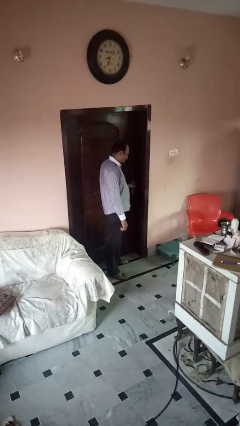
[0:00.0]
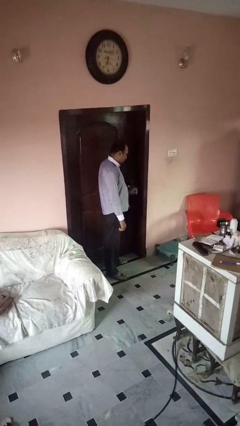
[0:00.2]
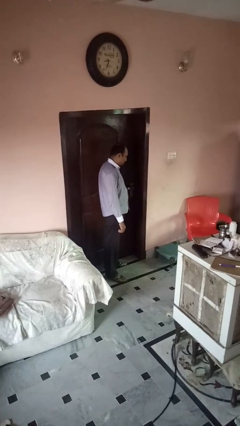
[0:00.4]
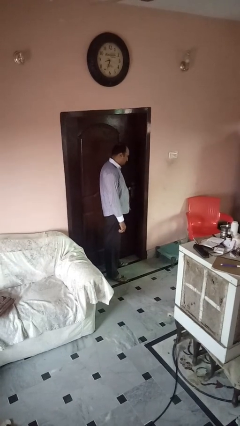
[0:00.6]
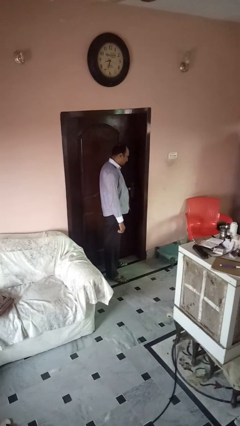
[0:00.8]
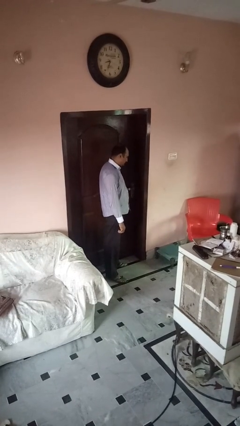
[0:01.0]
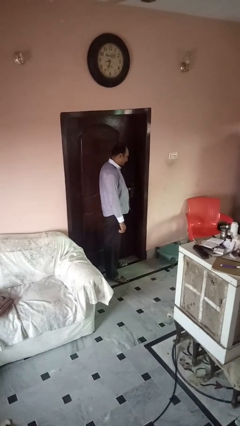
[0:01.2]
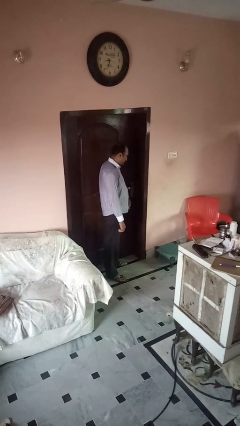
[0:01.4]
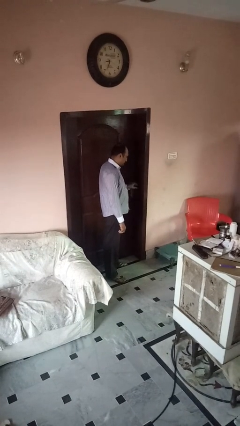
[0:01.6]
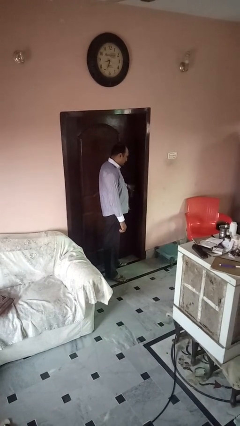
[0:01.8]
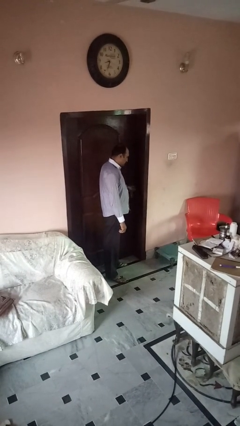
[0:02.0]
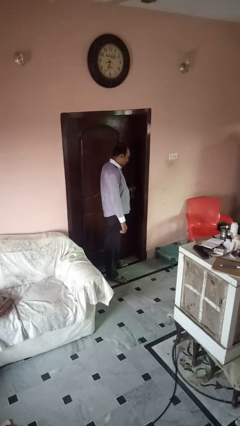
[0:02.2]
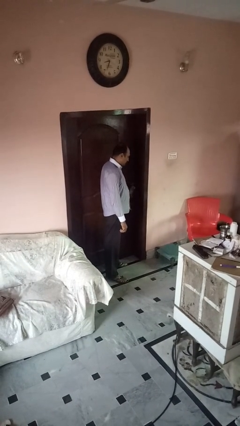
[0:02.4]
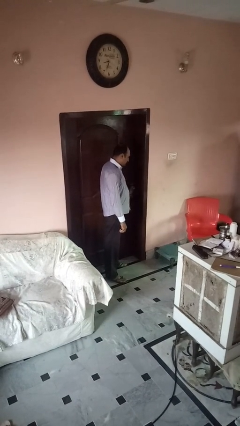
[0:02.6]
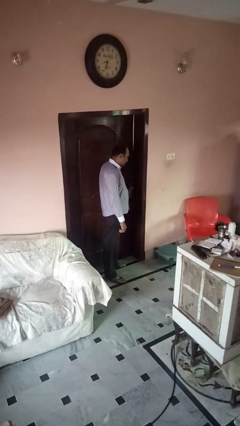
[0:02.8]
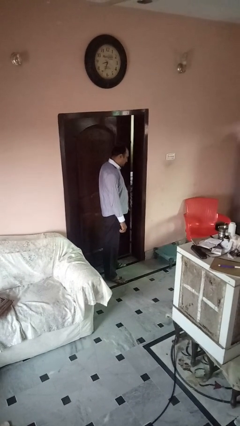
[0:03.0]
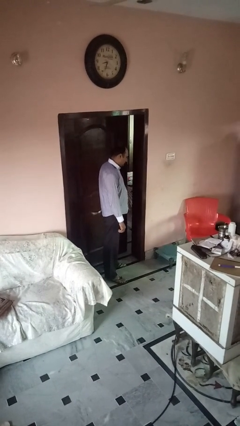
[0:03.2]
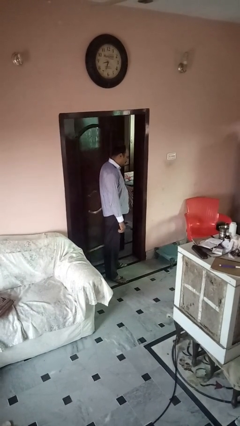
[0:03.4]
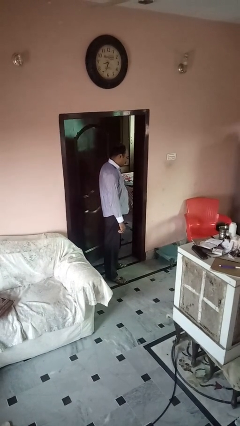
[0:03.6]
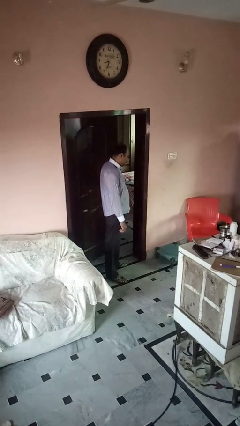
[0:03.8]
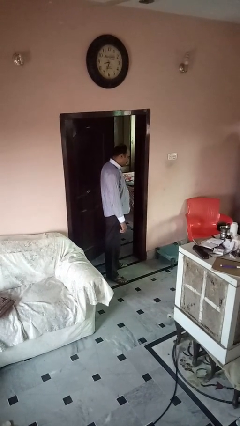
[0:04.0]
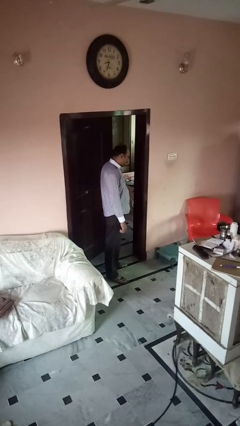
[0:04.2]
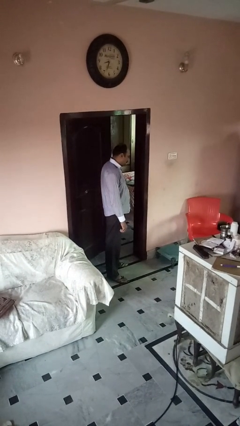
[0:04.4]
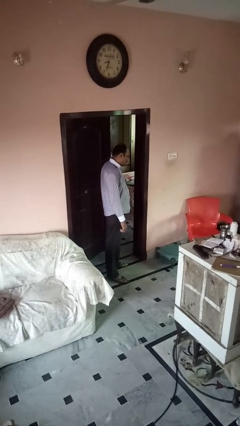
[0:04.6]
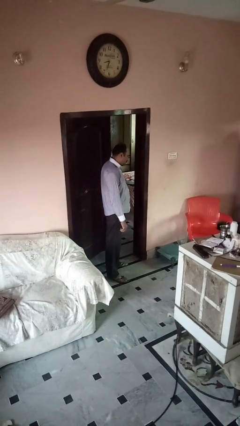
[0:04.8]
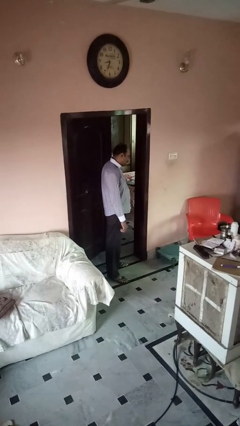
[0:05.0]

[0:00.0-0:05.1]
person opens gate

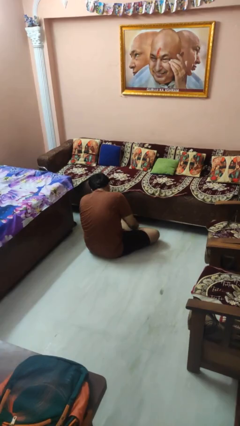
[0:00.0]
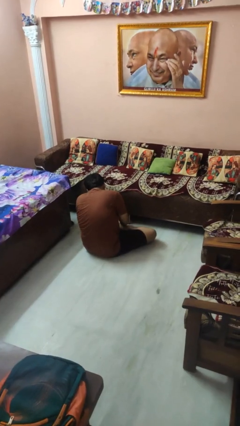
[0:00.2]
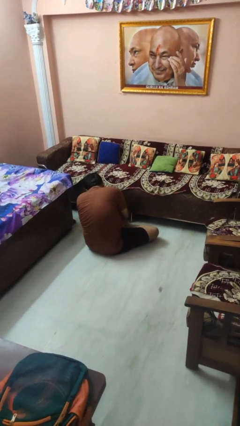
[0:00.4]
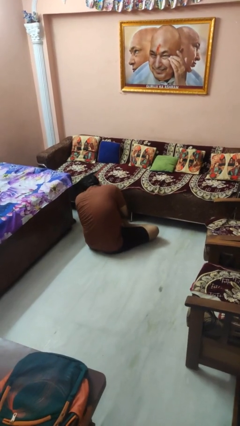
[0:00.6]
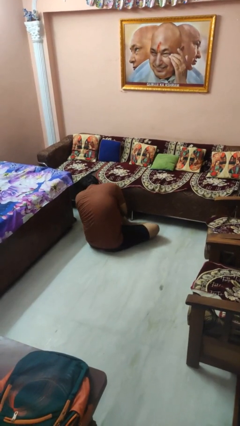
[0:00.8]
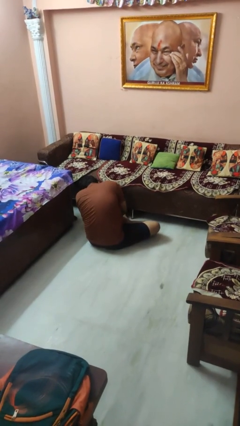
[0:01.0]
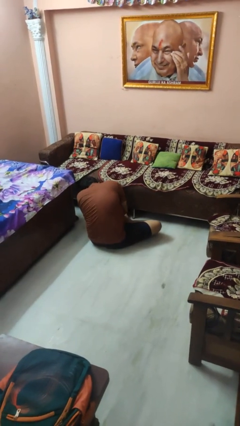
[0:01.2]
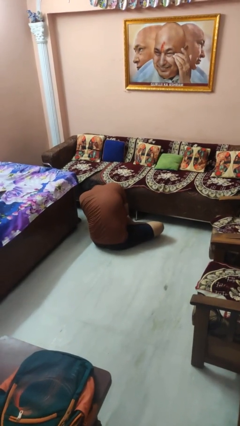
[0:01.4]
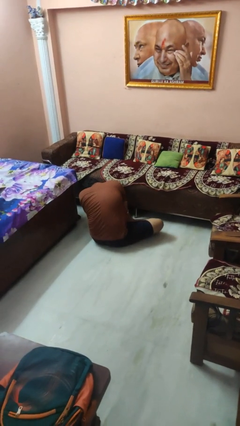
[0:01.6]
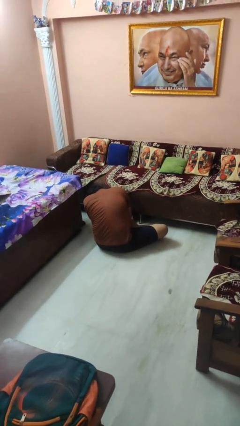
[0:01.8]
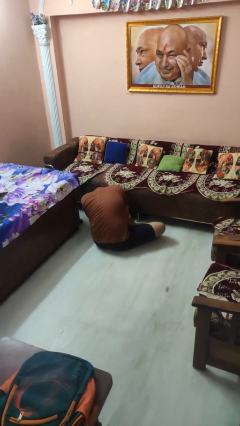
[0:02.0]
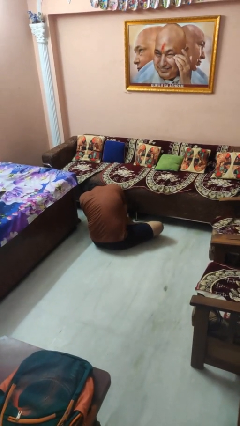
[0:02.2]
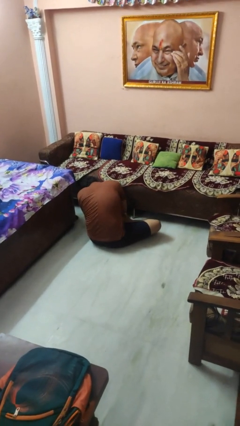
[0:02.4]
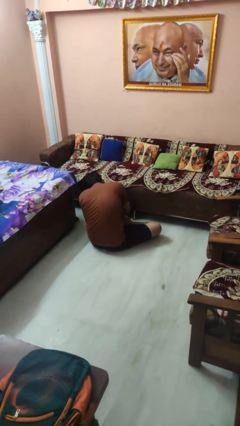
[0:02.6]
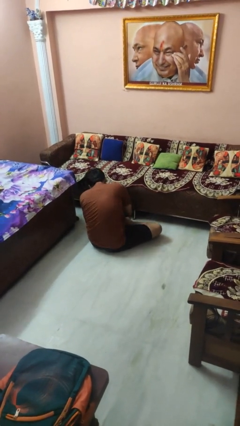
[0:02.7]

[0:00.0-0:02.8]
person searches under couch

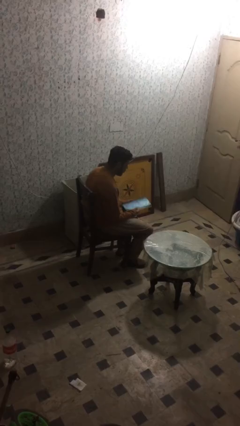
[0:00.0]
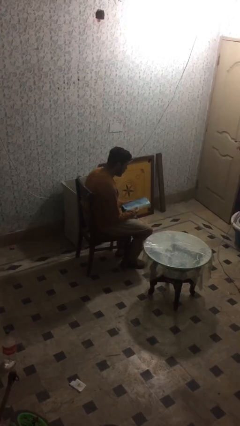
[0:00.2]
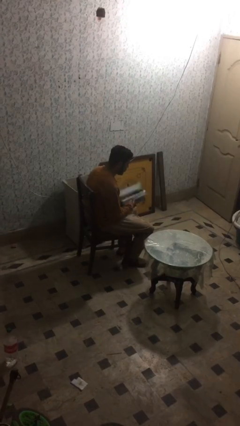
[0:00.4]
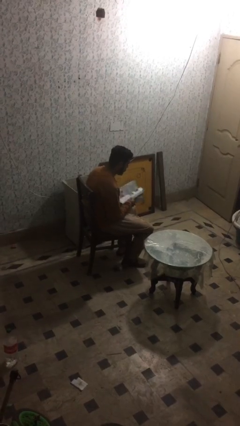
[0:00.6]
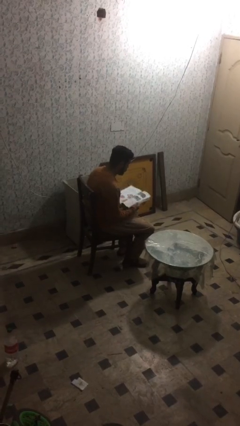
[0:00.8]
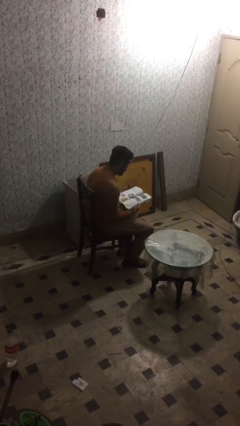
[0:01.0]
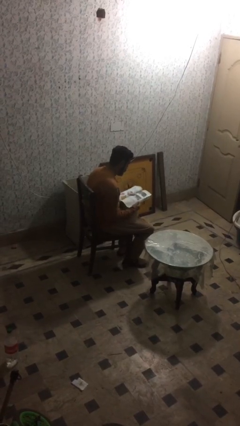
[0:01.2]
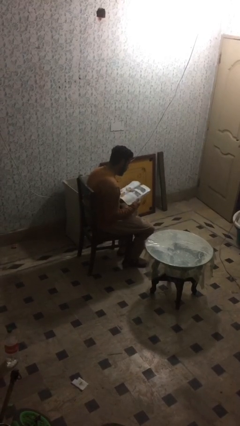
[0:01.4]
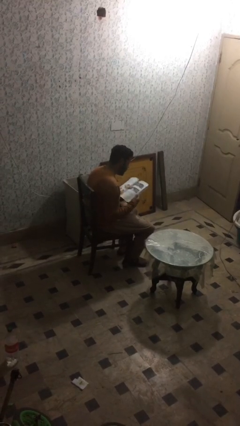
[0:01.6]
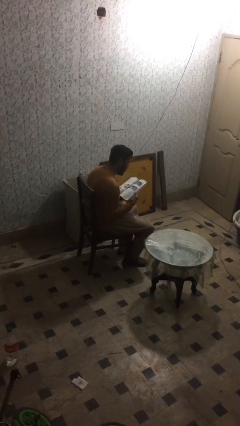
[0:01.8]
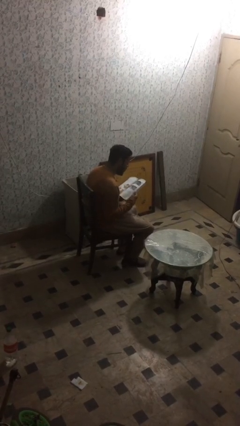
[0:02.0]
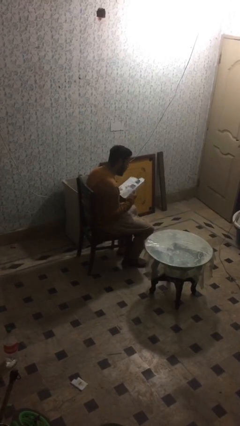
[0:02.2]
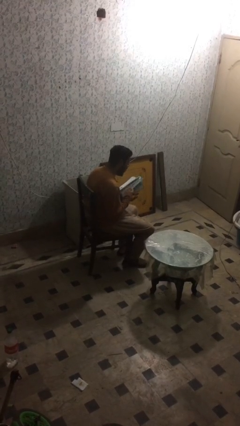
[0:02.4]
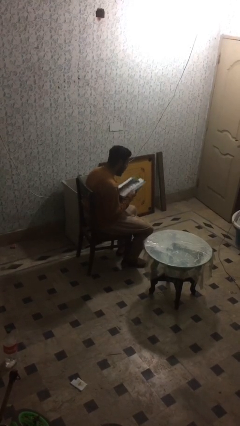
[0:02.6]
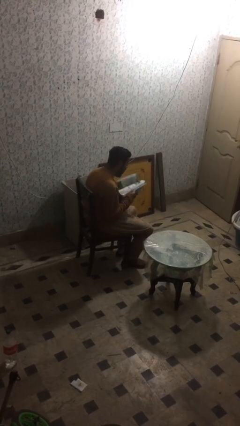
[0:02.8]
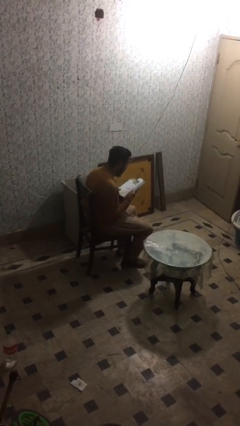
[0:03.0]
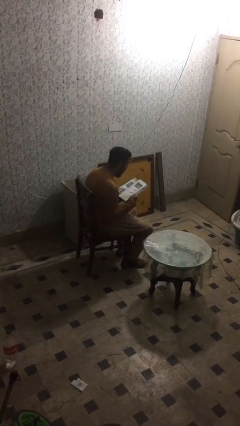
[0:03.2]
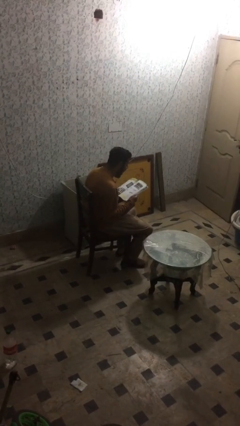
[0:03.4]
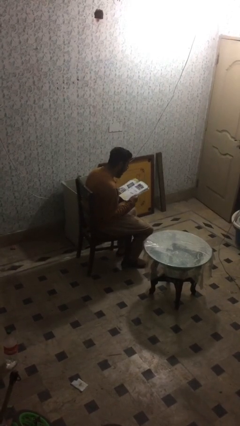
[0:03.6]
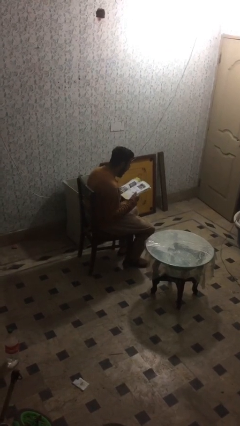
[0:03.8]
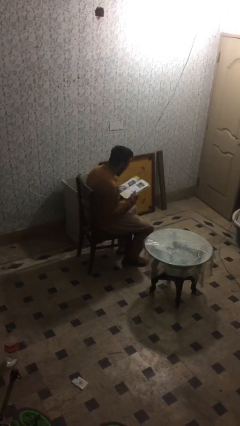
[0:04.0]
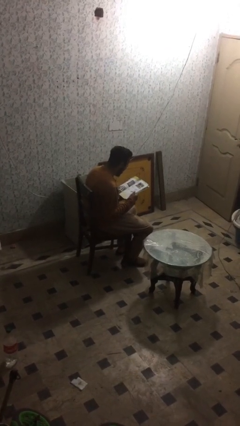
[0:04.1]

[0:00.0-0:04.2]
person reads document

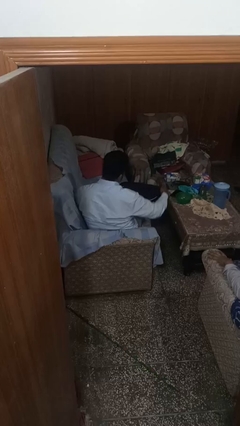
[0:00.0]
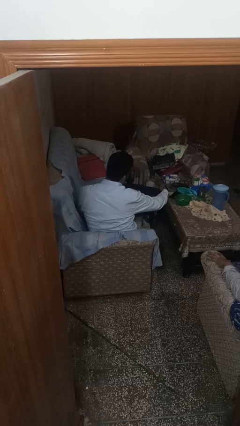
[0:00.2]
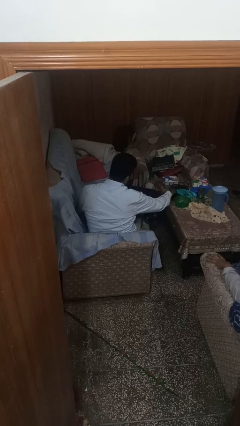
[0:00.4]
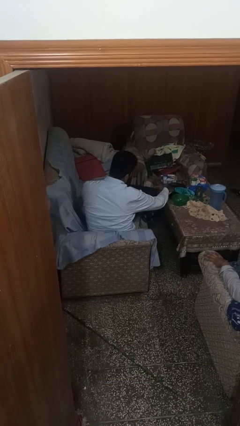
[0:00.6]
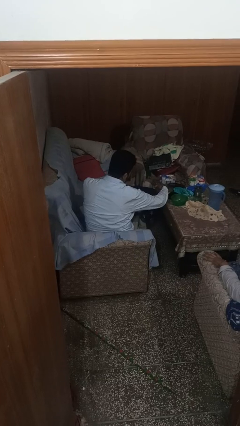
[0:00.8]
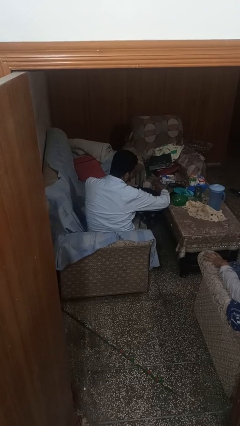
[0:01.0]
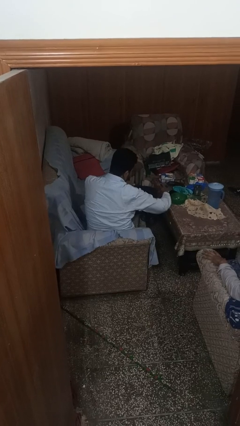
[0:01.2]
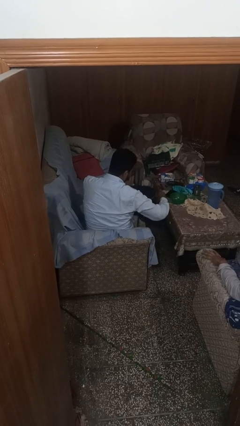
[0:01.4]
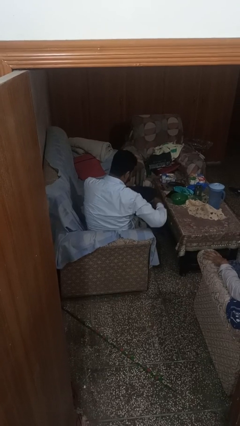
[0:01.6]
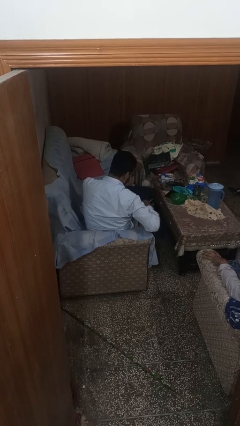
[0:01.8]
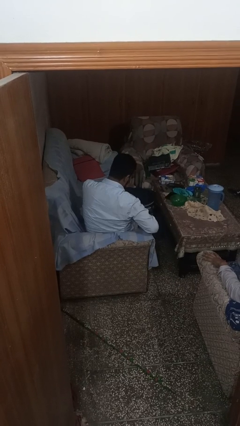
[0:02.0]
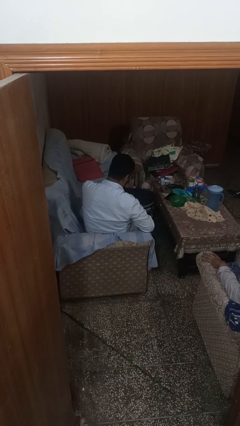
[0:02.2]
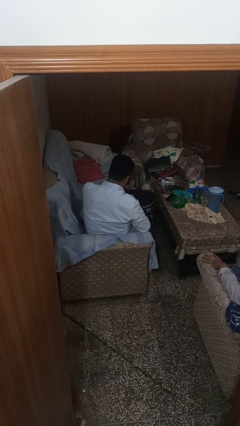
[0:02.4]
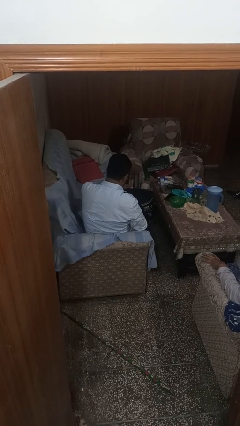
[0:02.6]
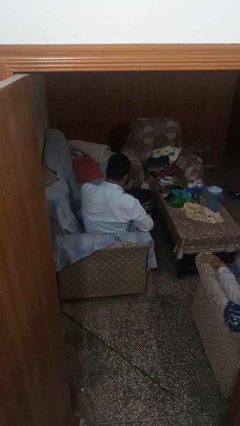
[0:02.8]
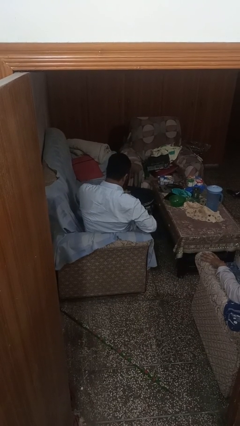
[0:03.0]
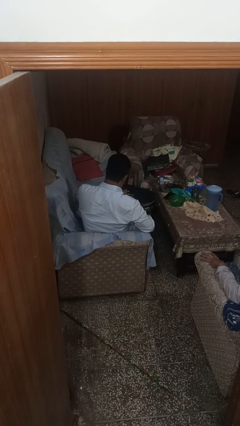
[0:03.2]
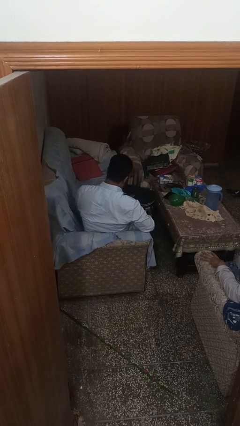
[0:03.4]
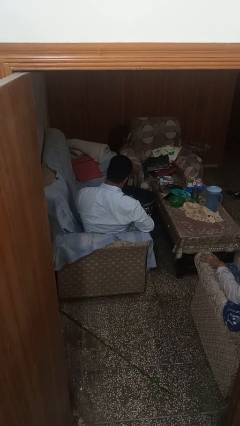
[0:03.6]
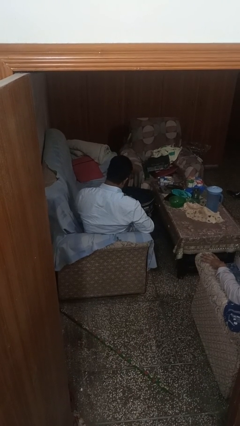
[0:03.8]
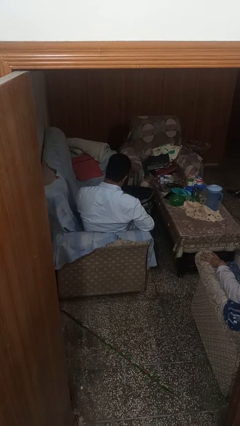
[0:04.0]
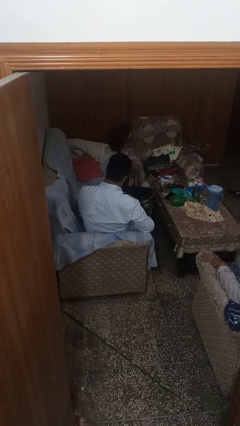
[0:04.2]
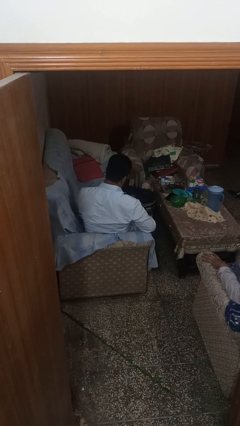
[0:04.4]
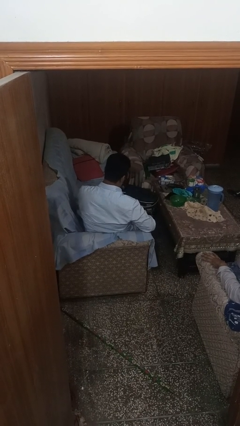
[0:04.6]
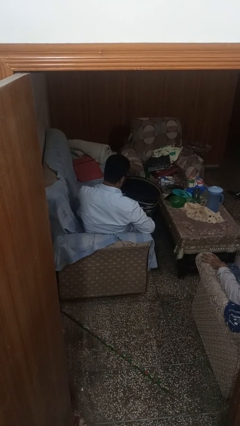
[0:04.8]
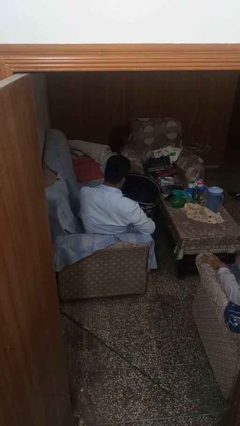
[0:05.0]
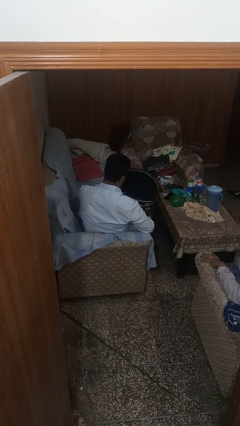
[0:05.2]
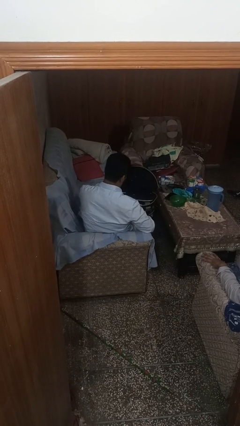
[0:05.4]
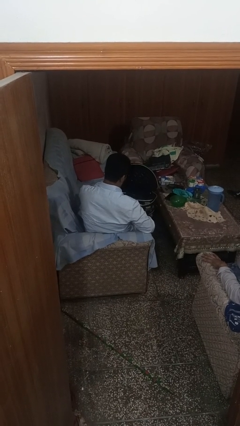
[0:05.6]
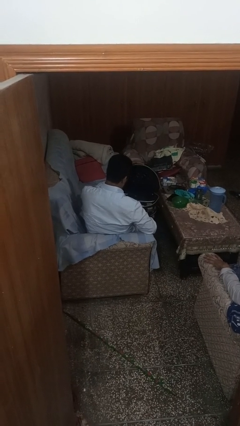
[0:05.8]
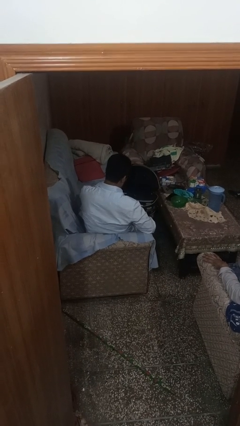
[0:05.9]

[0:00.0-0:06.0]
person opens suitcase
